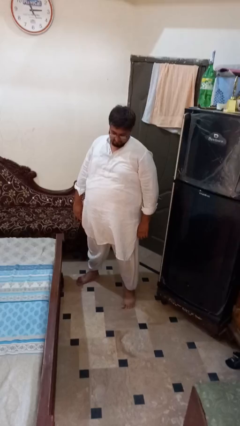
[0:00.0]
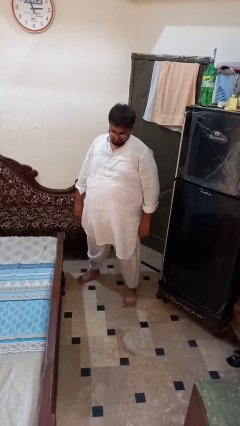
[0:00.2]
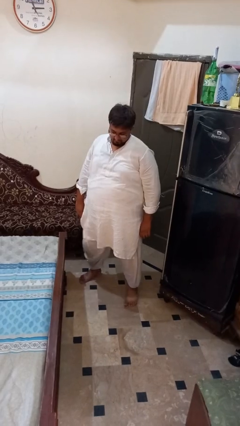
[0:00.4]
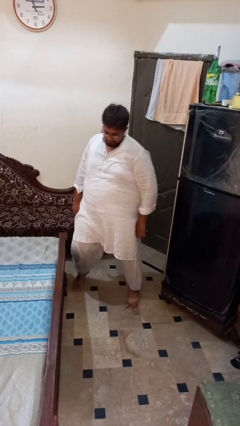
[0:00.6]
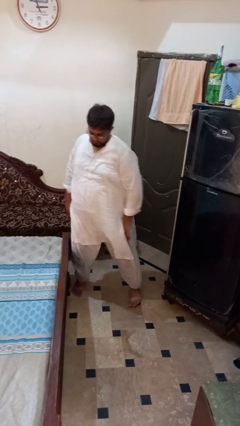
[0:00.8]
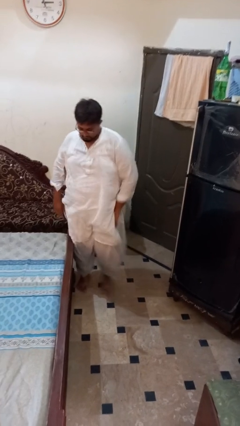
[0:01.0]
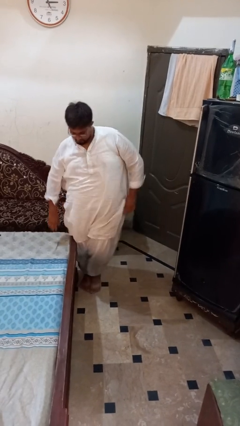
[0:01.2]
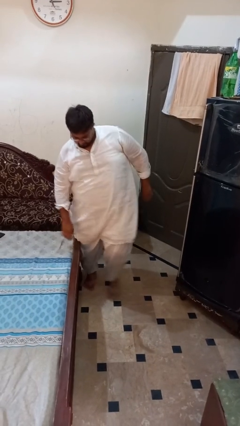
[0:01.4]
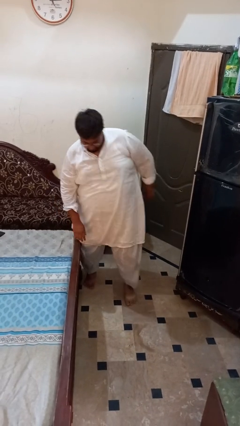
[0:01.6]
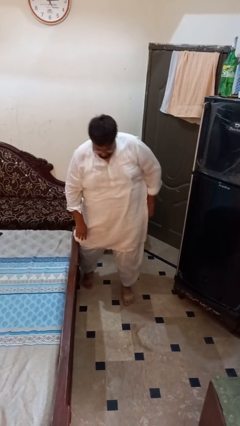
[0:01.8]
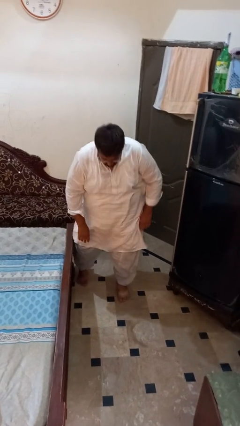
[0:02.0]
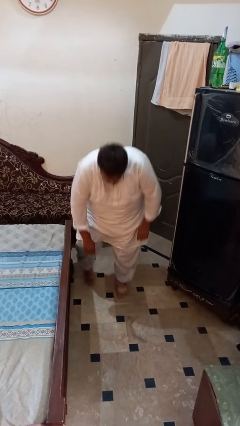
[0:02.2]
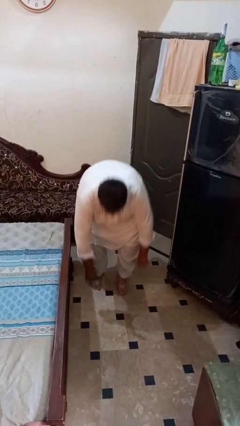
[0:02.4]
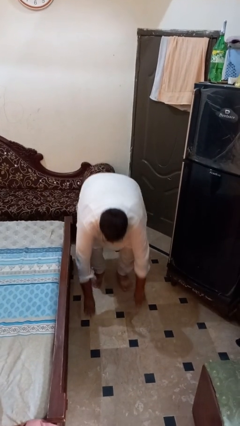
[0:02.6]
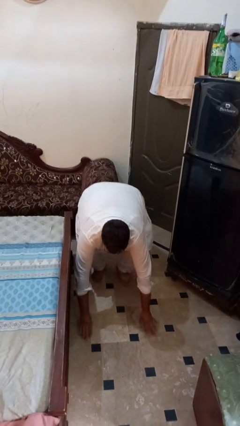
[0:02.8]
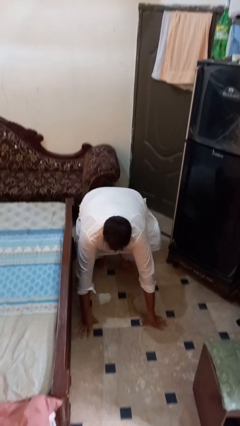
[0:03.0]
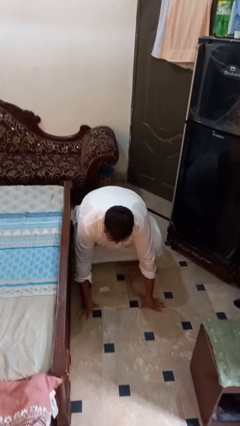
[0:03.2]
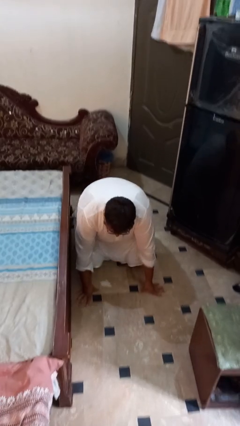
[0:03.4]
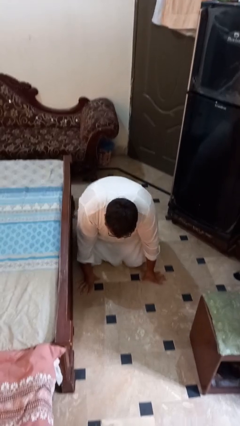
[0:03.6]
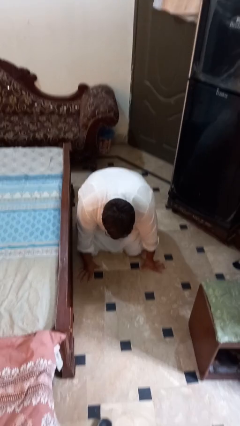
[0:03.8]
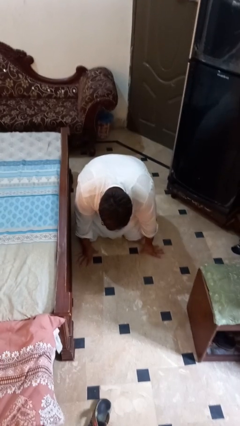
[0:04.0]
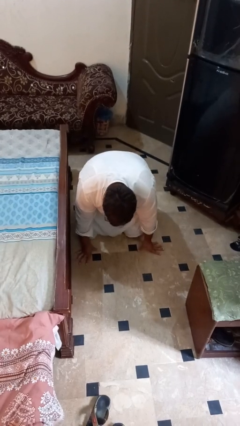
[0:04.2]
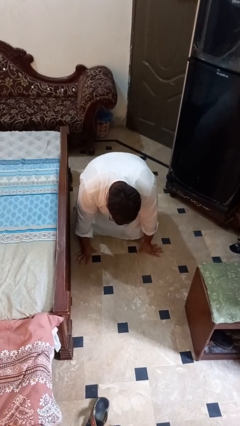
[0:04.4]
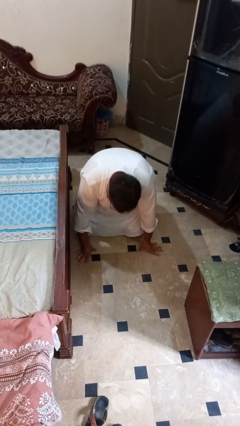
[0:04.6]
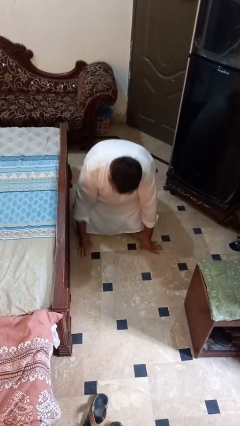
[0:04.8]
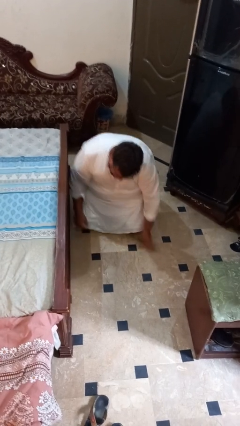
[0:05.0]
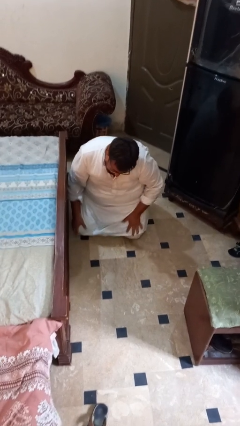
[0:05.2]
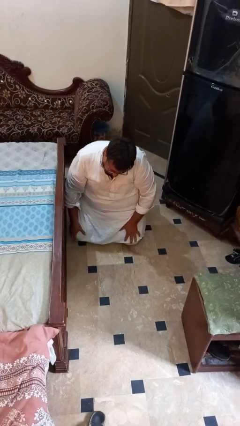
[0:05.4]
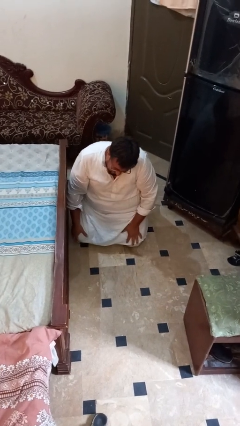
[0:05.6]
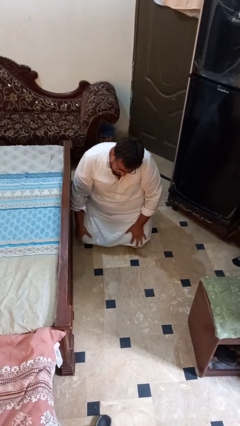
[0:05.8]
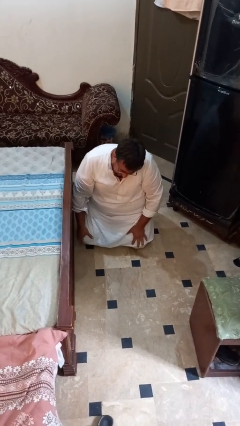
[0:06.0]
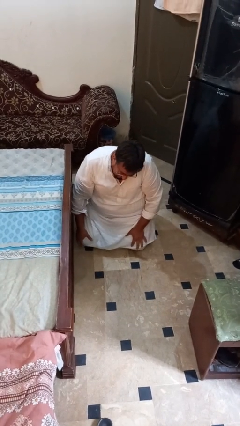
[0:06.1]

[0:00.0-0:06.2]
person trips on object on floor

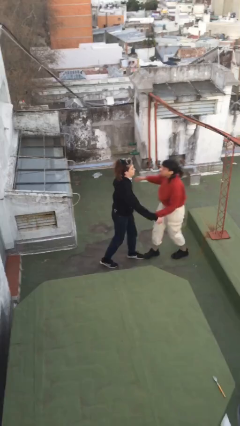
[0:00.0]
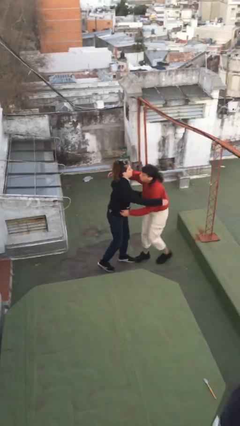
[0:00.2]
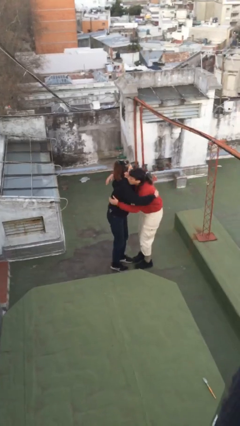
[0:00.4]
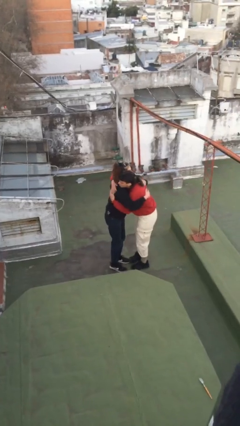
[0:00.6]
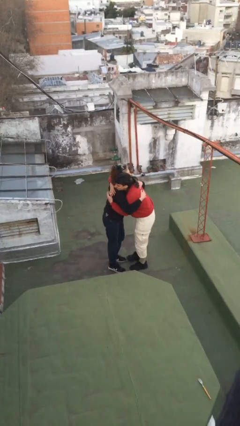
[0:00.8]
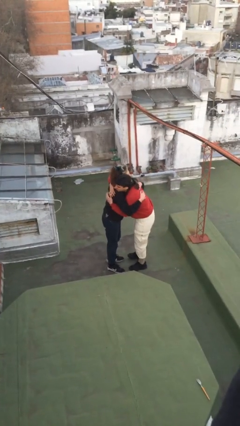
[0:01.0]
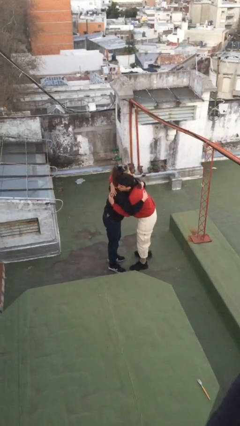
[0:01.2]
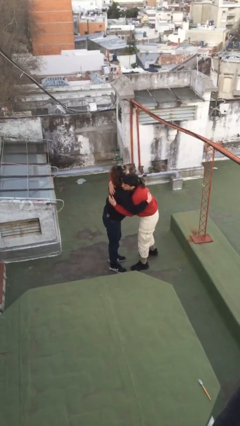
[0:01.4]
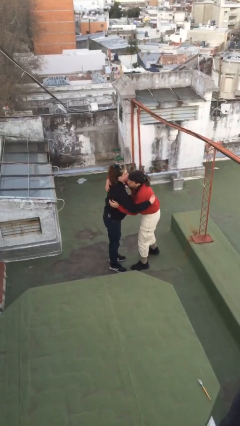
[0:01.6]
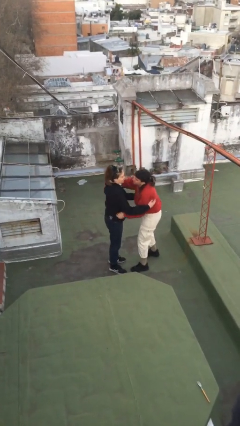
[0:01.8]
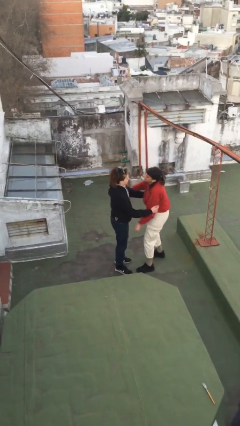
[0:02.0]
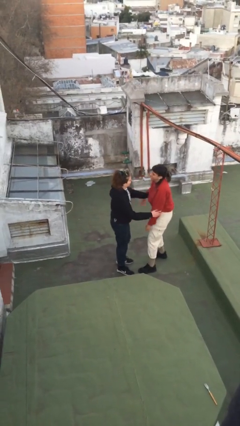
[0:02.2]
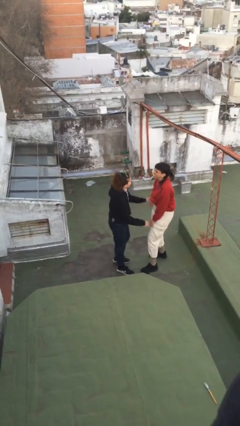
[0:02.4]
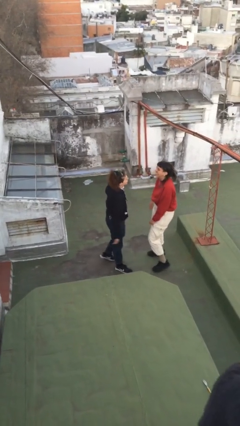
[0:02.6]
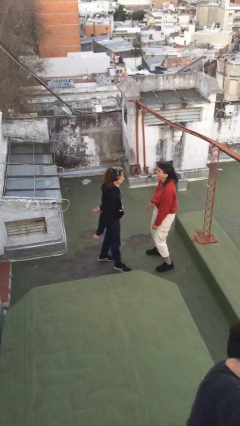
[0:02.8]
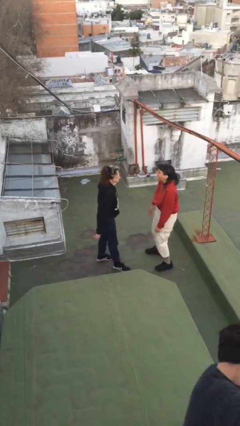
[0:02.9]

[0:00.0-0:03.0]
person embraces person

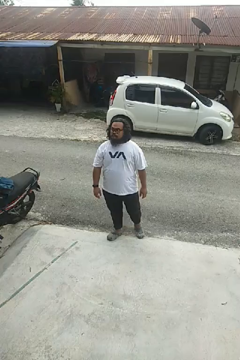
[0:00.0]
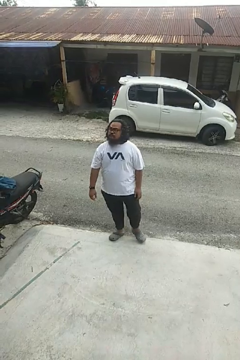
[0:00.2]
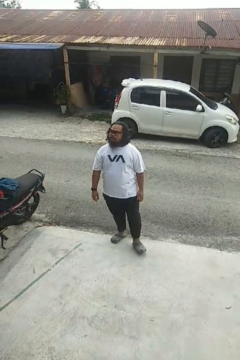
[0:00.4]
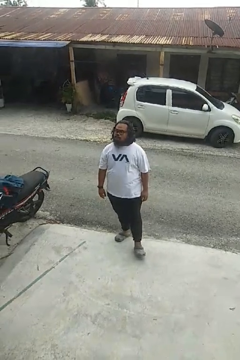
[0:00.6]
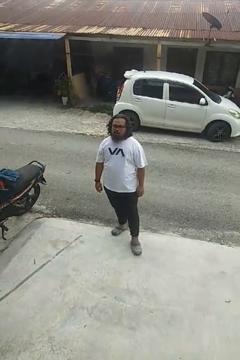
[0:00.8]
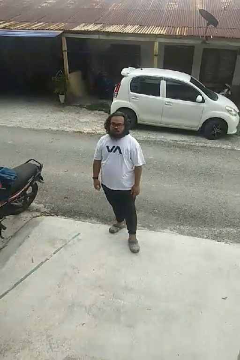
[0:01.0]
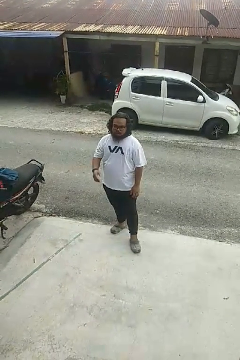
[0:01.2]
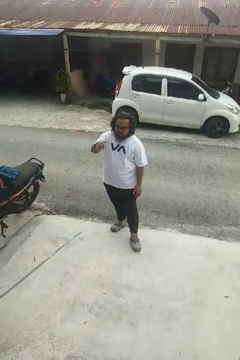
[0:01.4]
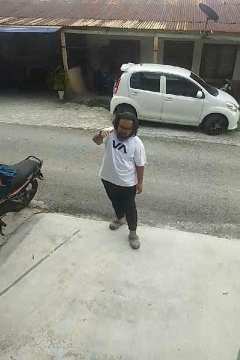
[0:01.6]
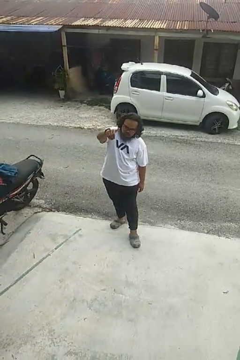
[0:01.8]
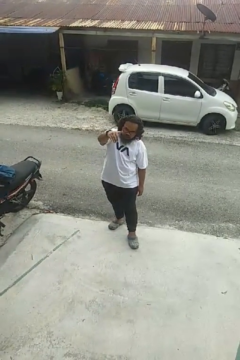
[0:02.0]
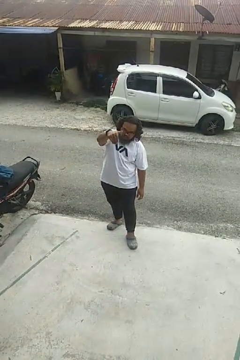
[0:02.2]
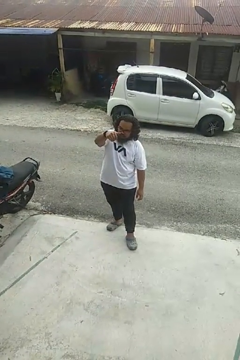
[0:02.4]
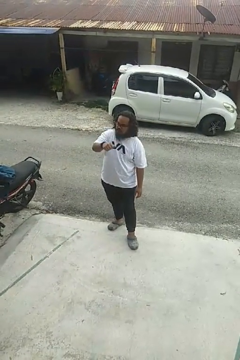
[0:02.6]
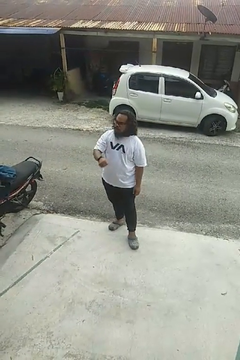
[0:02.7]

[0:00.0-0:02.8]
person gestures come here

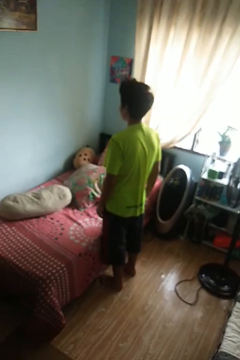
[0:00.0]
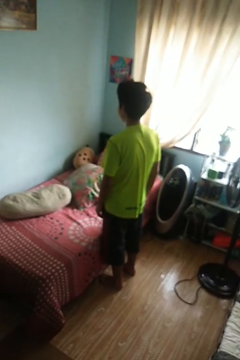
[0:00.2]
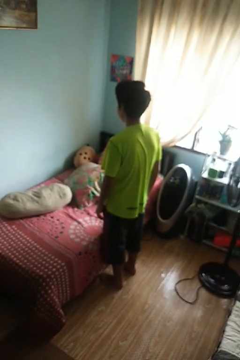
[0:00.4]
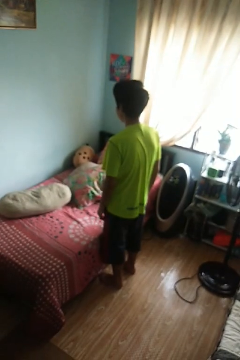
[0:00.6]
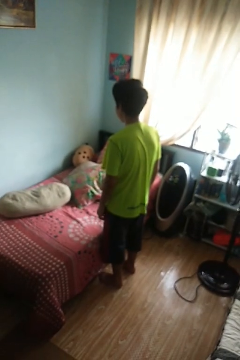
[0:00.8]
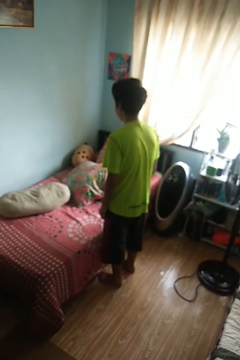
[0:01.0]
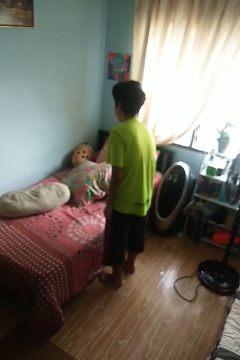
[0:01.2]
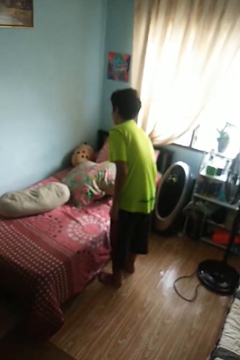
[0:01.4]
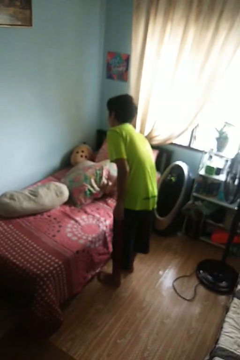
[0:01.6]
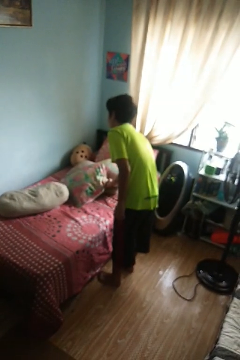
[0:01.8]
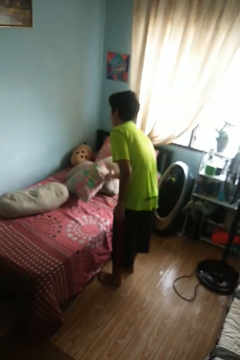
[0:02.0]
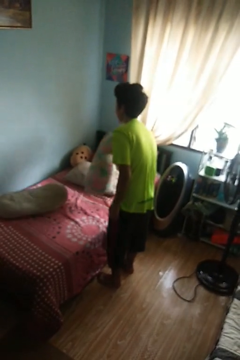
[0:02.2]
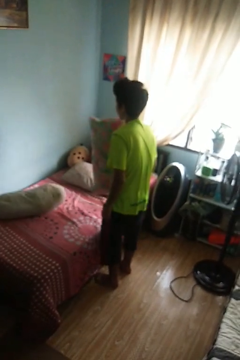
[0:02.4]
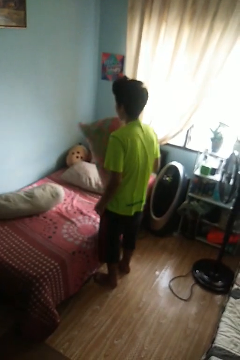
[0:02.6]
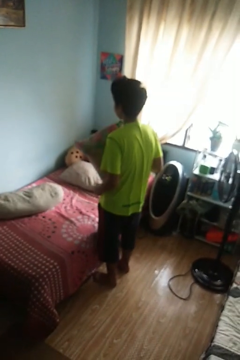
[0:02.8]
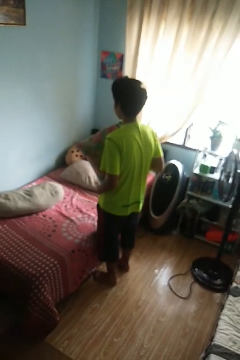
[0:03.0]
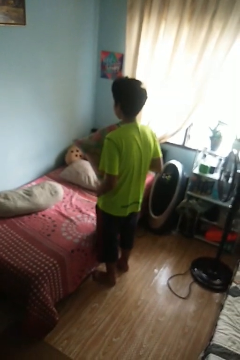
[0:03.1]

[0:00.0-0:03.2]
person picks up object from bed

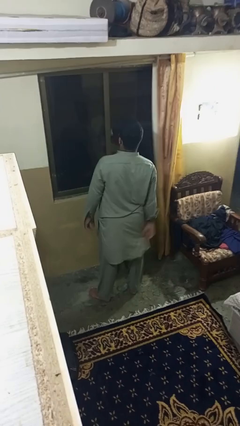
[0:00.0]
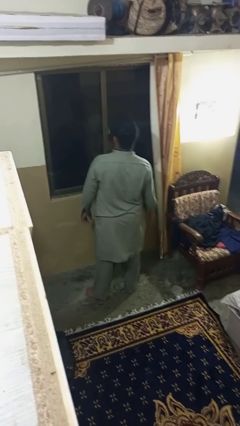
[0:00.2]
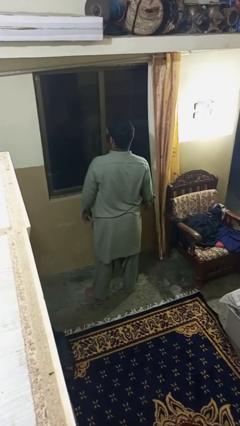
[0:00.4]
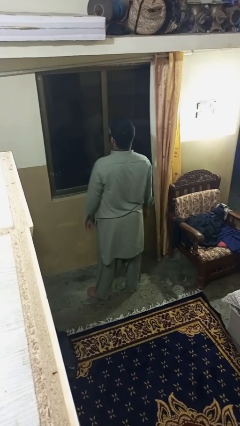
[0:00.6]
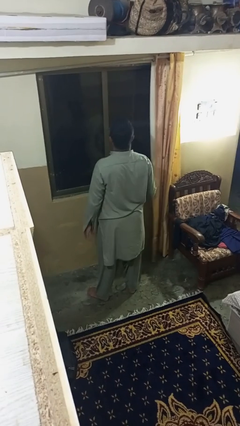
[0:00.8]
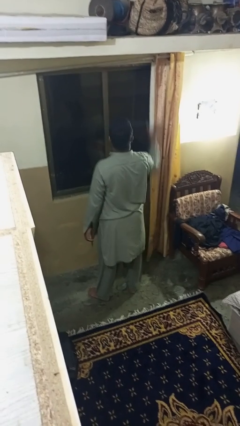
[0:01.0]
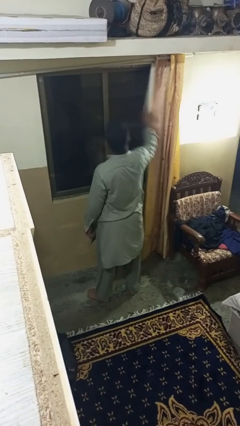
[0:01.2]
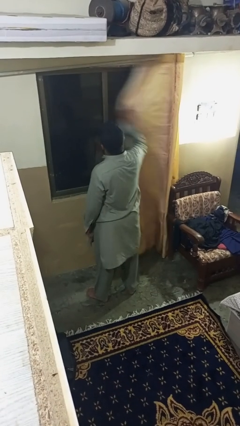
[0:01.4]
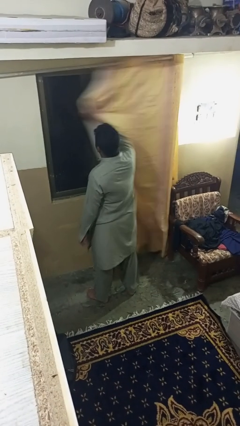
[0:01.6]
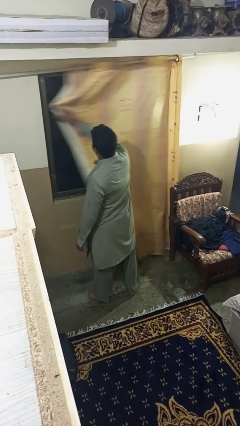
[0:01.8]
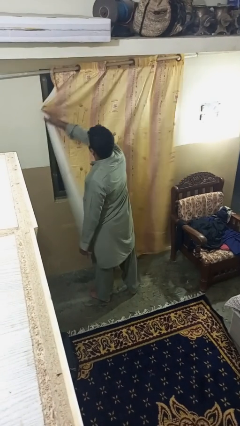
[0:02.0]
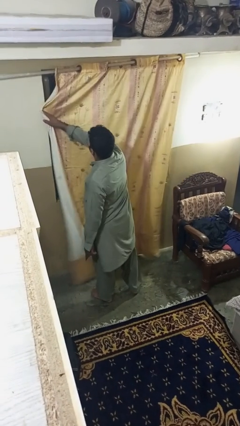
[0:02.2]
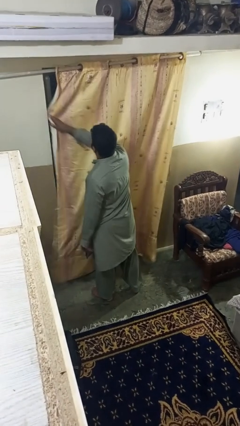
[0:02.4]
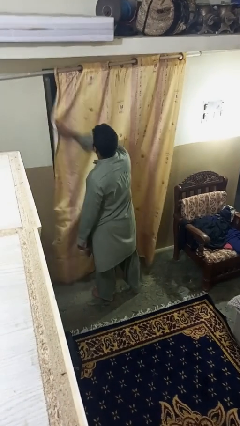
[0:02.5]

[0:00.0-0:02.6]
person closes curtains

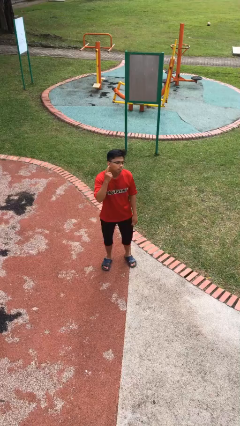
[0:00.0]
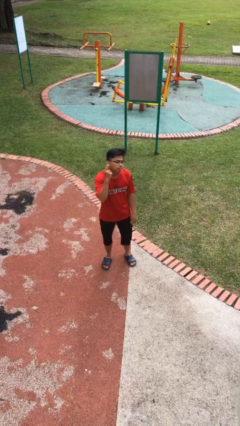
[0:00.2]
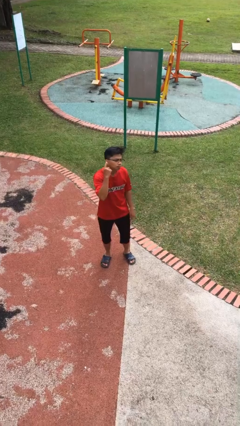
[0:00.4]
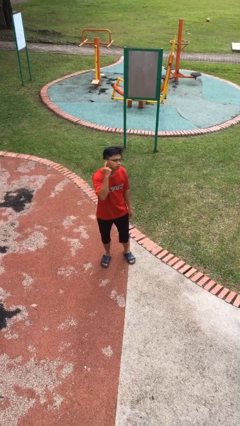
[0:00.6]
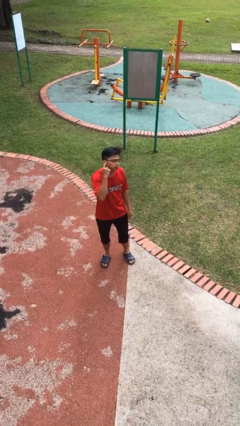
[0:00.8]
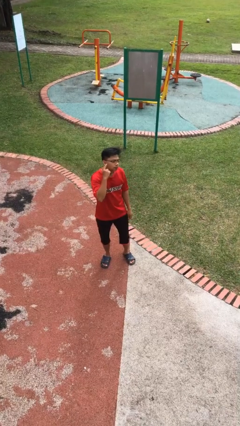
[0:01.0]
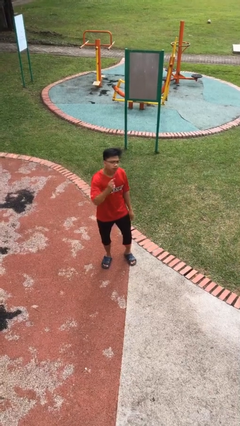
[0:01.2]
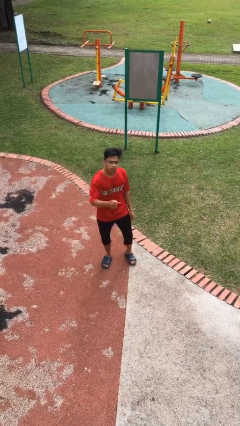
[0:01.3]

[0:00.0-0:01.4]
person gestures listen closely
